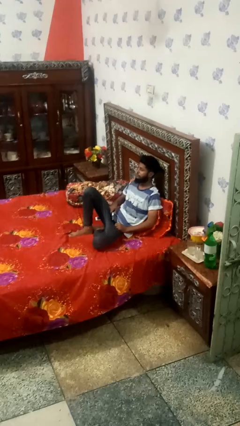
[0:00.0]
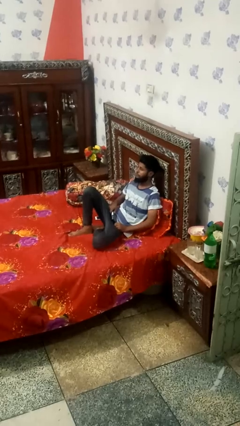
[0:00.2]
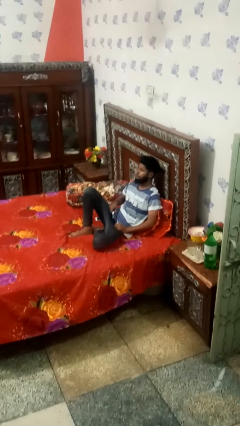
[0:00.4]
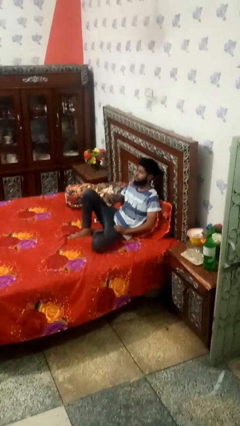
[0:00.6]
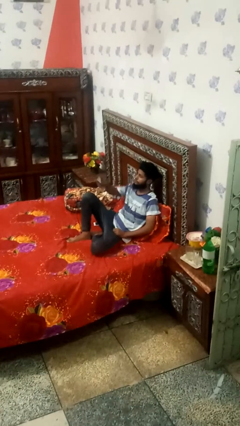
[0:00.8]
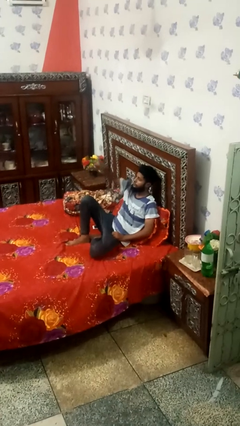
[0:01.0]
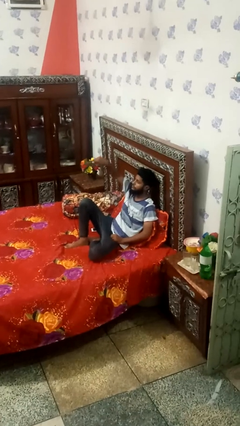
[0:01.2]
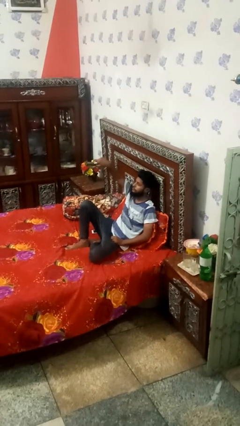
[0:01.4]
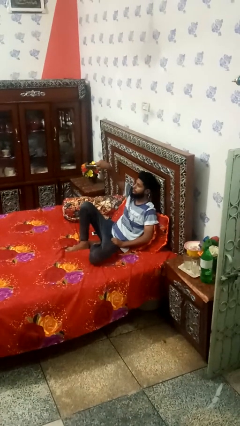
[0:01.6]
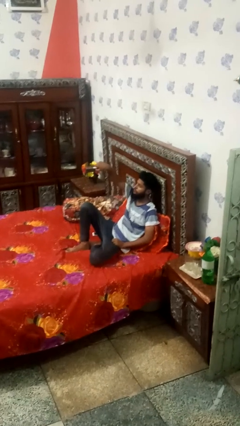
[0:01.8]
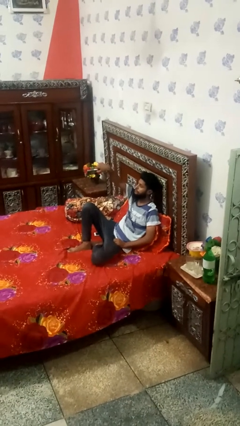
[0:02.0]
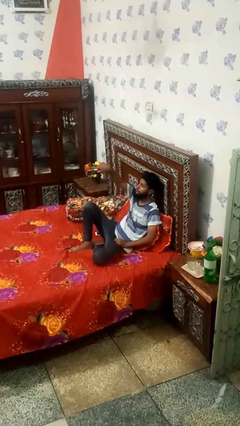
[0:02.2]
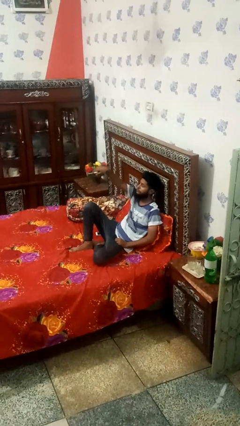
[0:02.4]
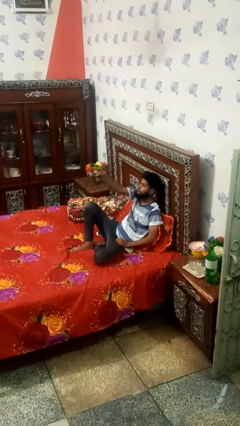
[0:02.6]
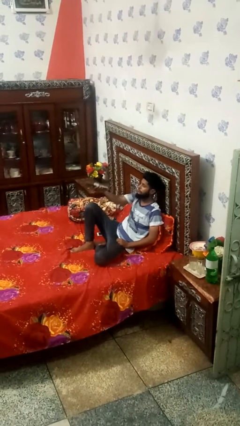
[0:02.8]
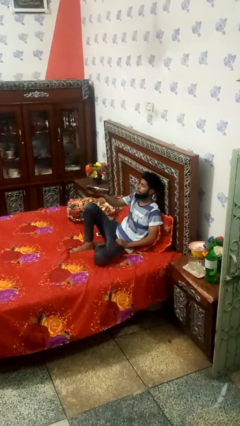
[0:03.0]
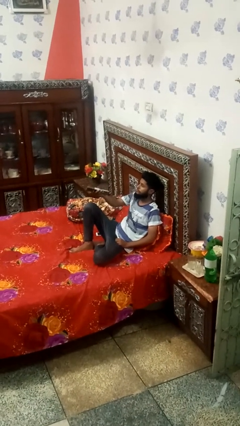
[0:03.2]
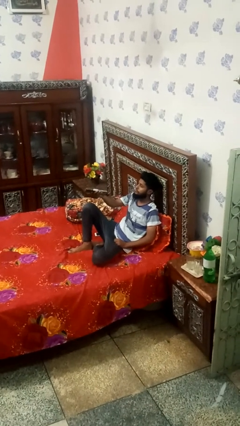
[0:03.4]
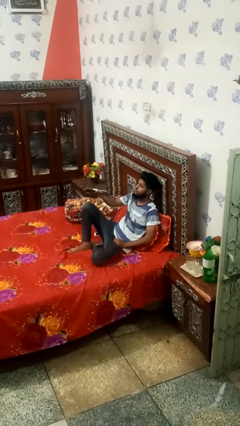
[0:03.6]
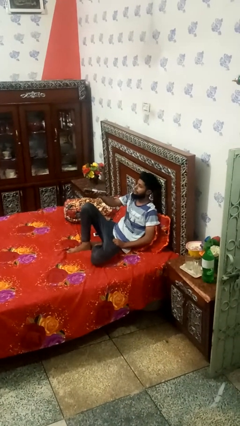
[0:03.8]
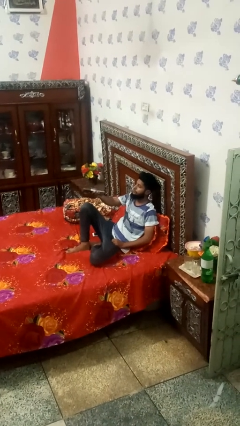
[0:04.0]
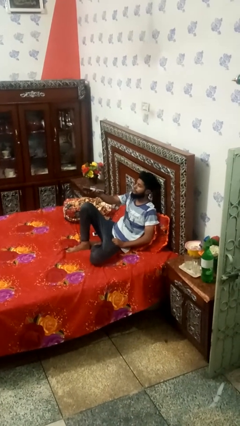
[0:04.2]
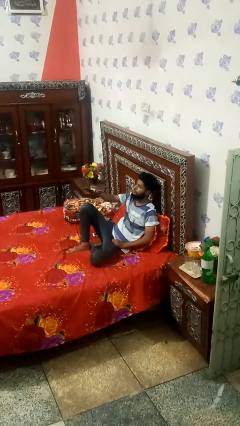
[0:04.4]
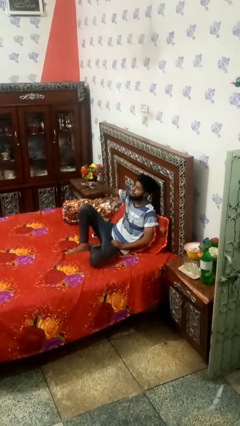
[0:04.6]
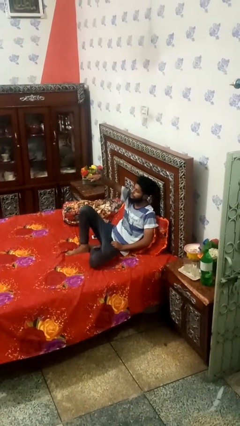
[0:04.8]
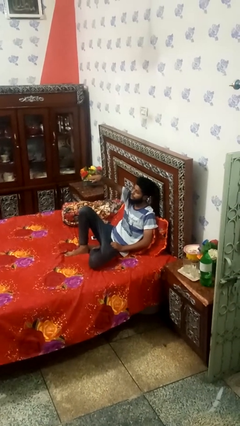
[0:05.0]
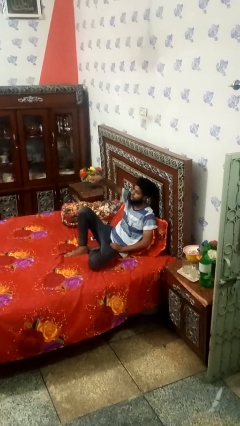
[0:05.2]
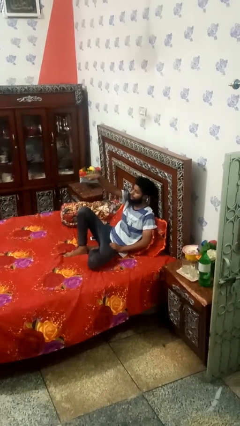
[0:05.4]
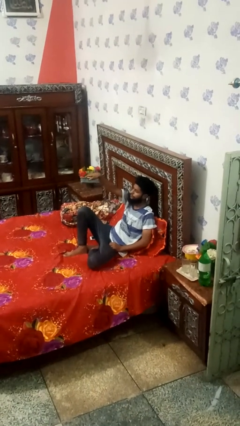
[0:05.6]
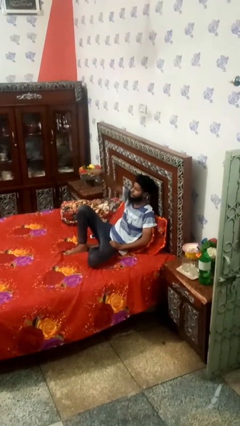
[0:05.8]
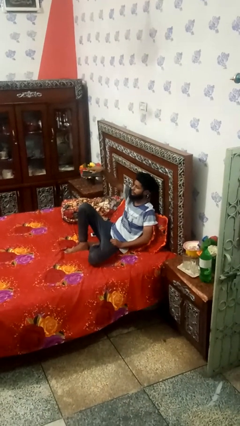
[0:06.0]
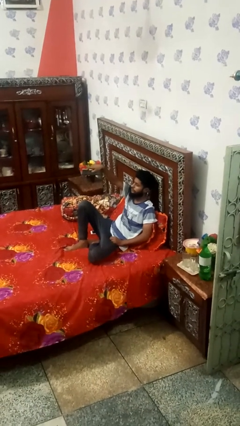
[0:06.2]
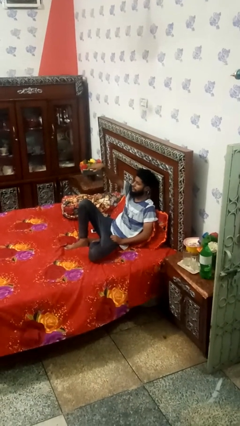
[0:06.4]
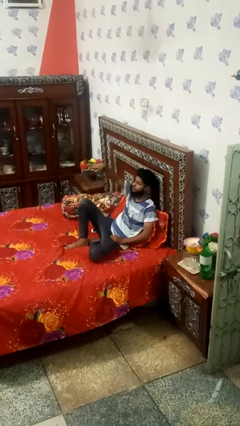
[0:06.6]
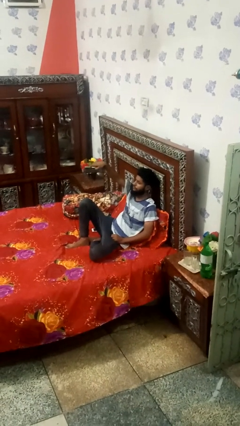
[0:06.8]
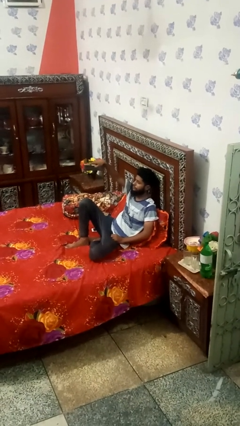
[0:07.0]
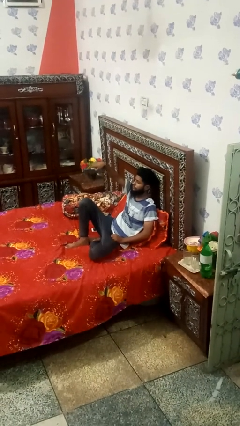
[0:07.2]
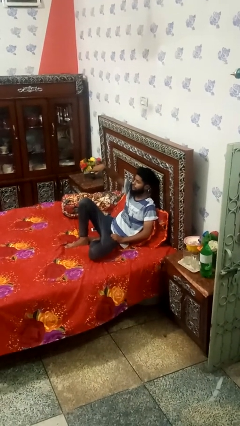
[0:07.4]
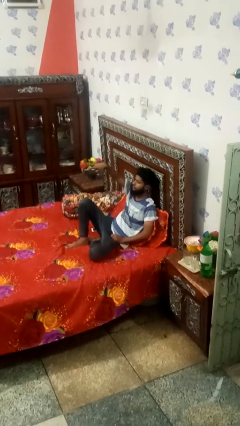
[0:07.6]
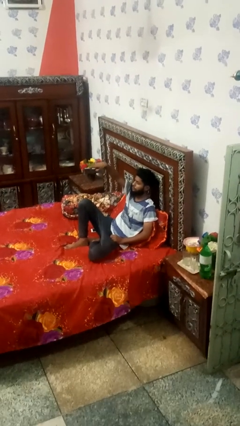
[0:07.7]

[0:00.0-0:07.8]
person uses television remote

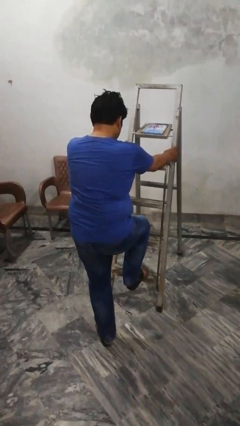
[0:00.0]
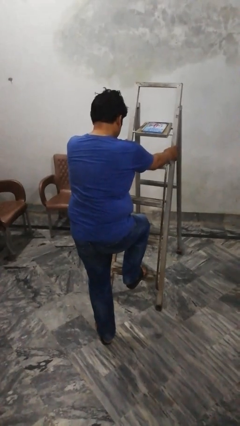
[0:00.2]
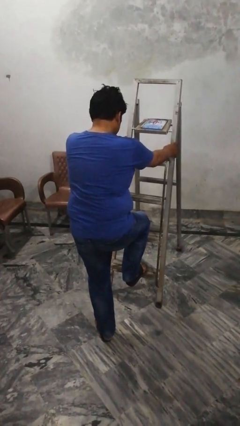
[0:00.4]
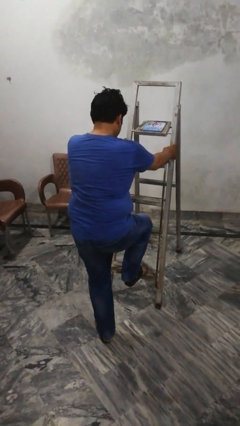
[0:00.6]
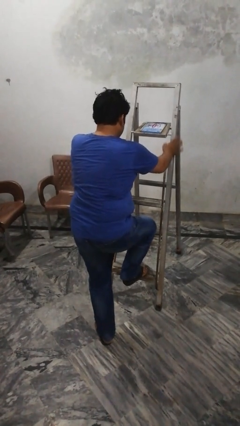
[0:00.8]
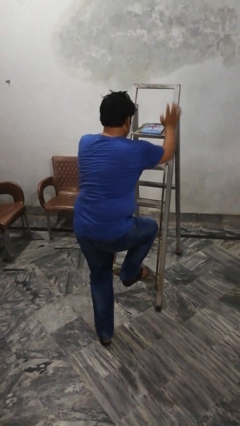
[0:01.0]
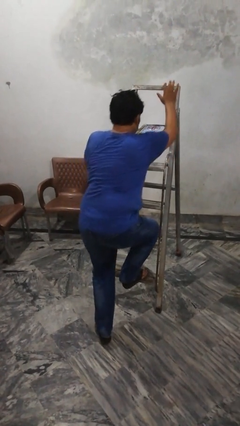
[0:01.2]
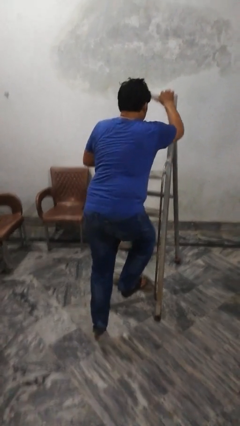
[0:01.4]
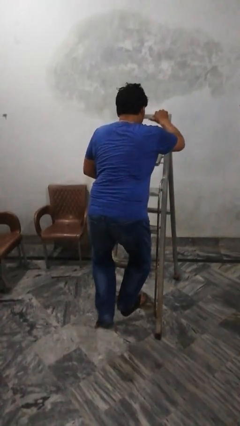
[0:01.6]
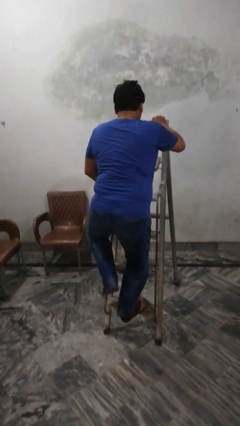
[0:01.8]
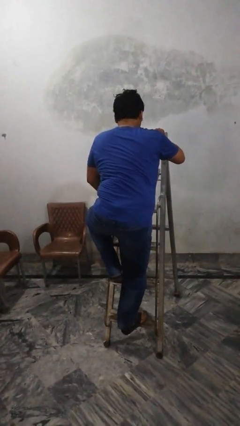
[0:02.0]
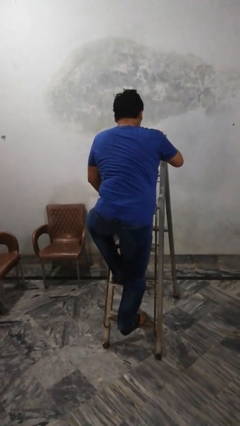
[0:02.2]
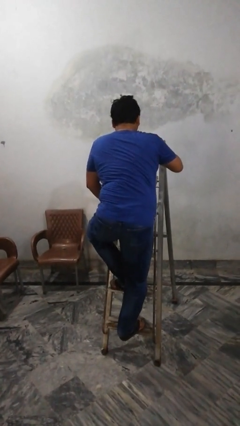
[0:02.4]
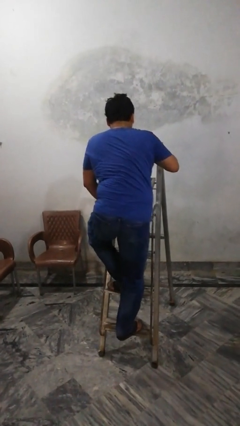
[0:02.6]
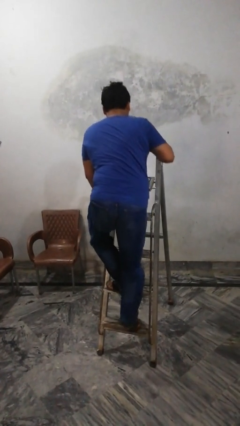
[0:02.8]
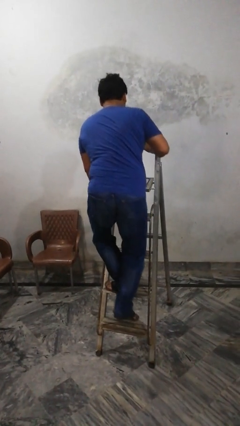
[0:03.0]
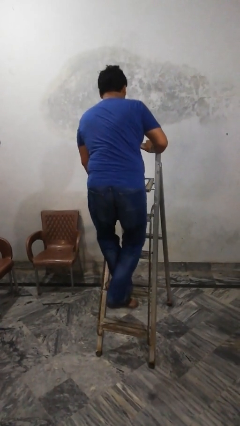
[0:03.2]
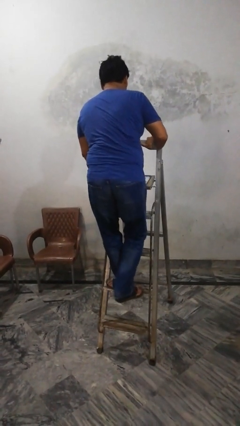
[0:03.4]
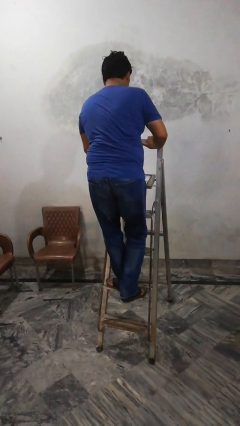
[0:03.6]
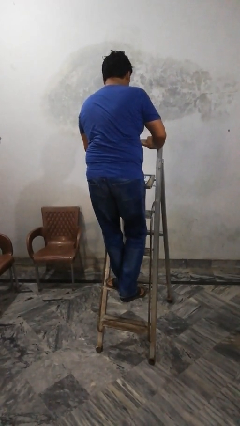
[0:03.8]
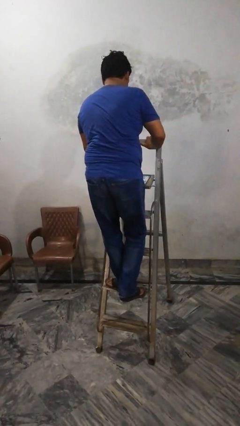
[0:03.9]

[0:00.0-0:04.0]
person climbs up ladder

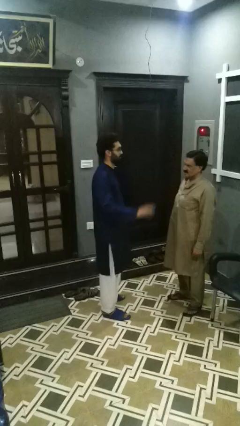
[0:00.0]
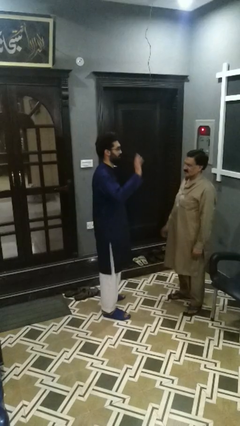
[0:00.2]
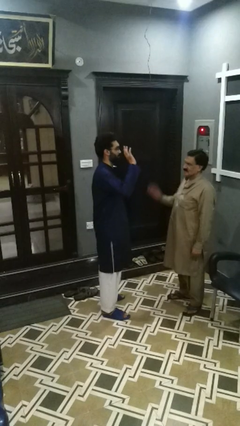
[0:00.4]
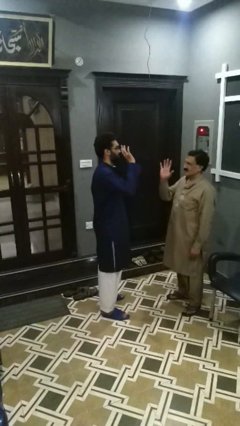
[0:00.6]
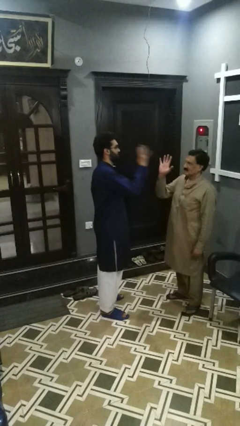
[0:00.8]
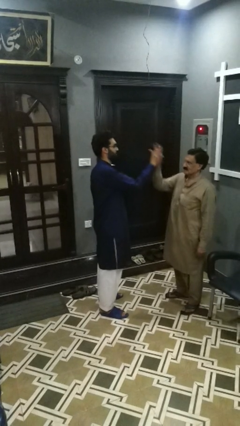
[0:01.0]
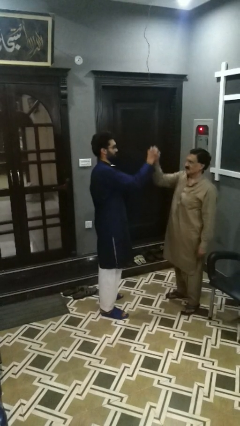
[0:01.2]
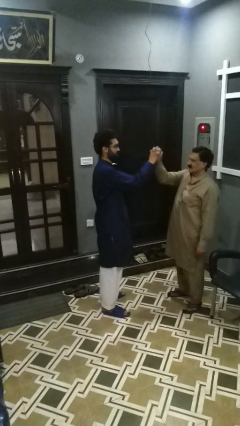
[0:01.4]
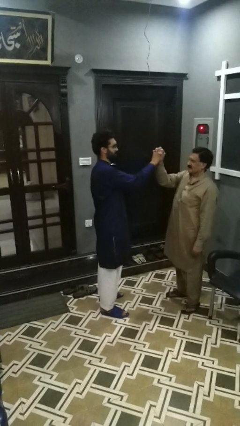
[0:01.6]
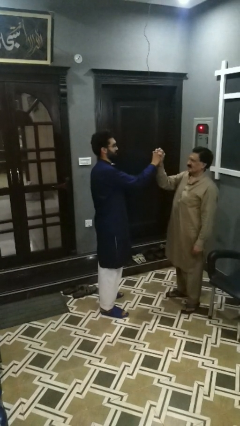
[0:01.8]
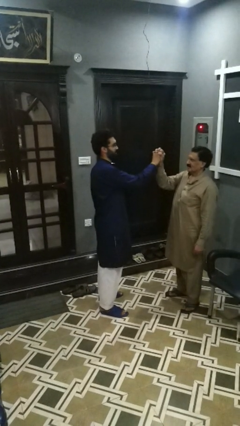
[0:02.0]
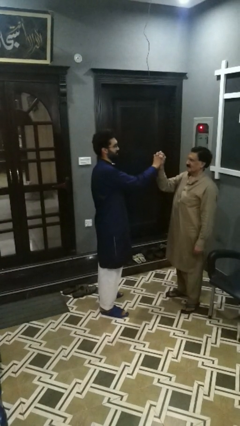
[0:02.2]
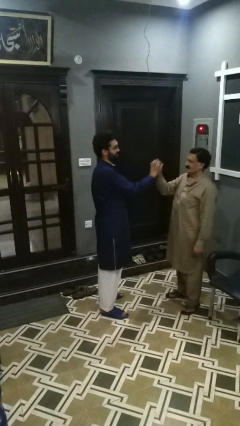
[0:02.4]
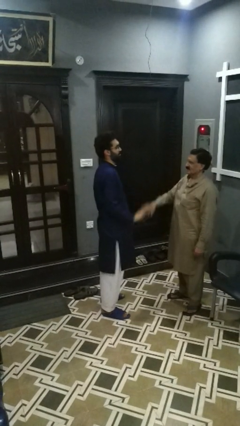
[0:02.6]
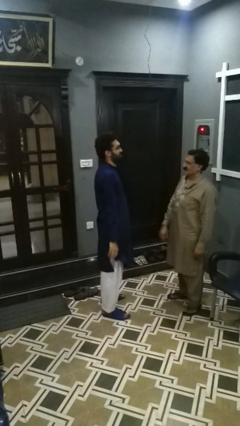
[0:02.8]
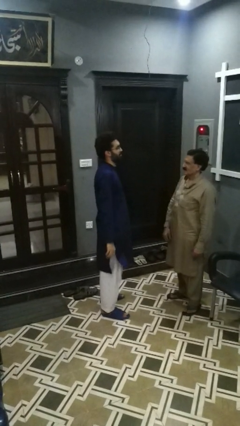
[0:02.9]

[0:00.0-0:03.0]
person highfives hand

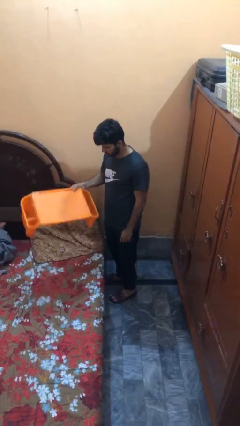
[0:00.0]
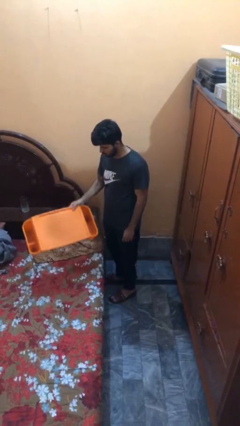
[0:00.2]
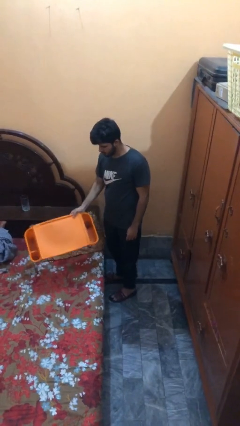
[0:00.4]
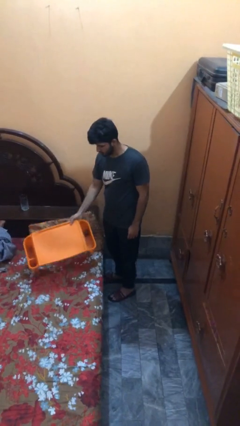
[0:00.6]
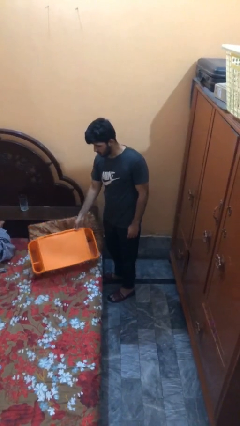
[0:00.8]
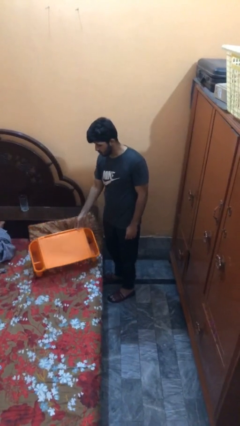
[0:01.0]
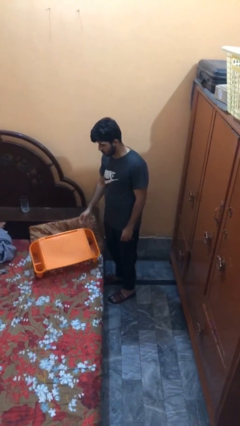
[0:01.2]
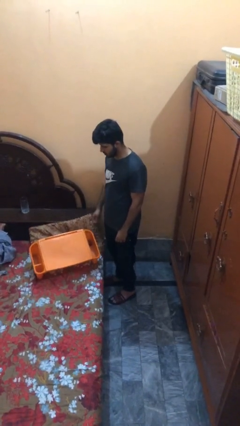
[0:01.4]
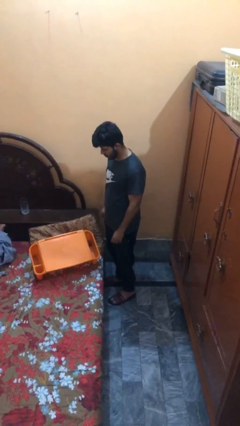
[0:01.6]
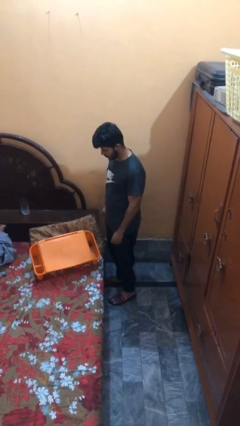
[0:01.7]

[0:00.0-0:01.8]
person puts down object on bed

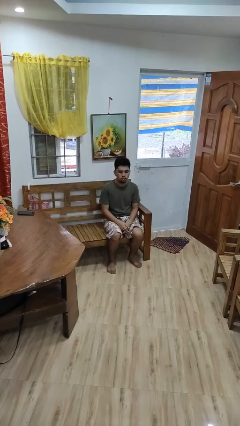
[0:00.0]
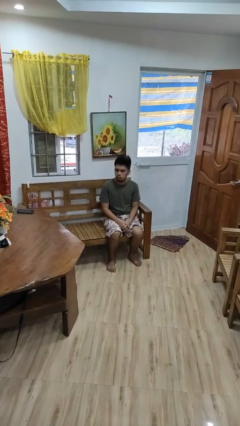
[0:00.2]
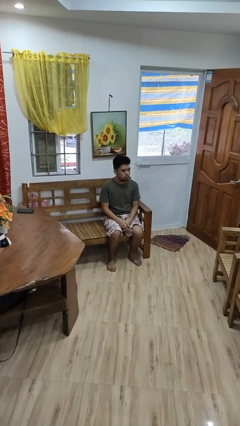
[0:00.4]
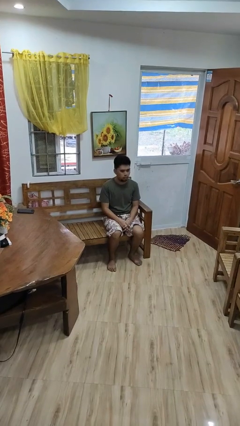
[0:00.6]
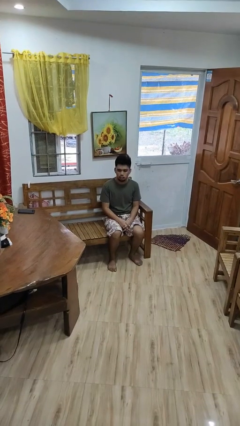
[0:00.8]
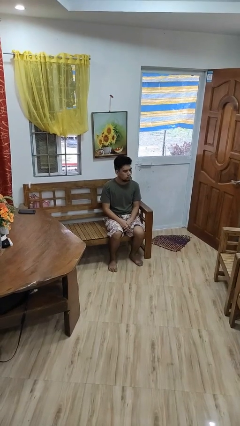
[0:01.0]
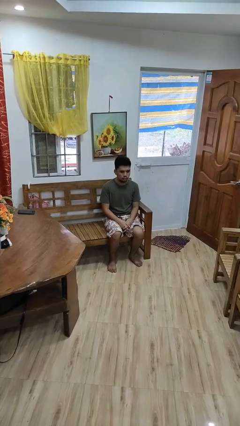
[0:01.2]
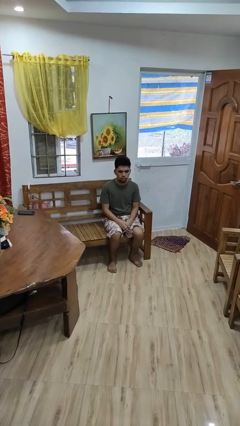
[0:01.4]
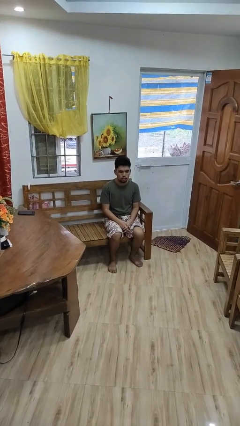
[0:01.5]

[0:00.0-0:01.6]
person shakes head
